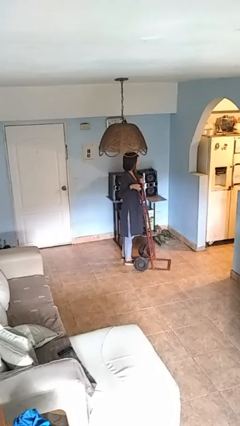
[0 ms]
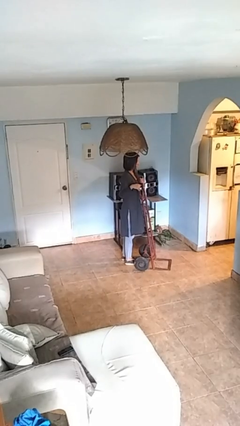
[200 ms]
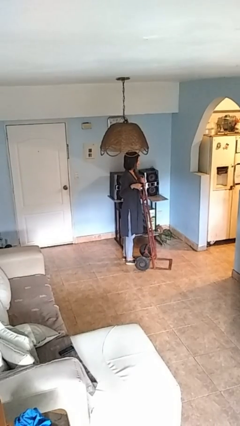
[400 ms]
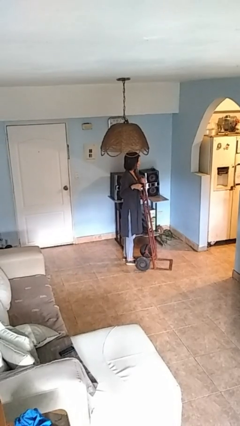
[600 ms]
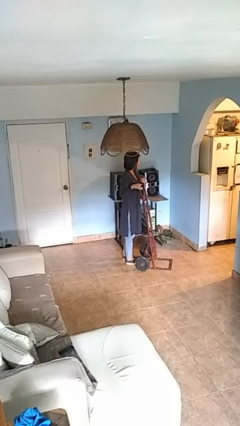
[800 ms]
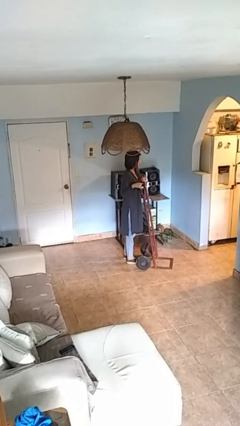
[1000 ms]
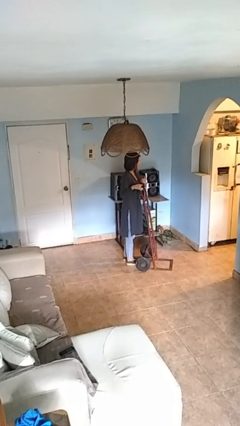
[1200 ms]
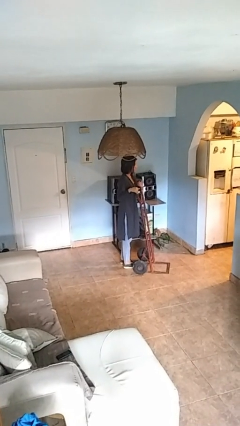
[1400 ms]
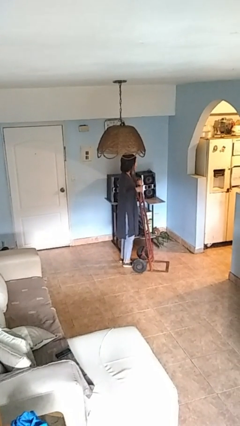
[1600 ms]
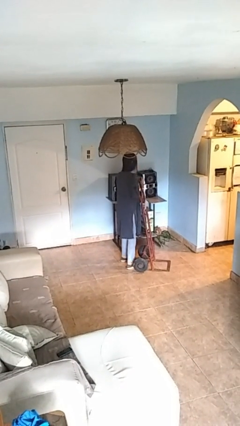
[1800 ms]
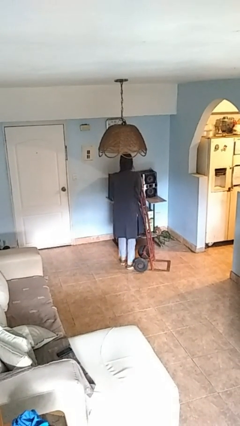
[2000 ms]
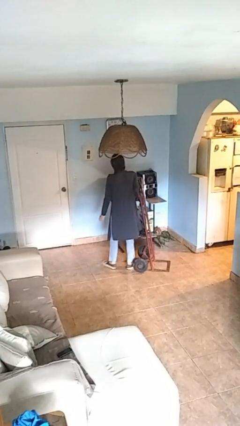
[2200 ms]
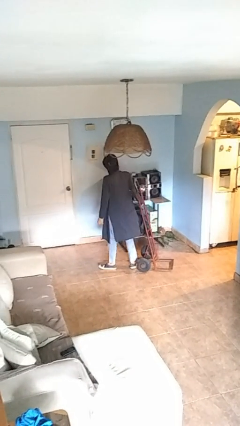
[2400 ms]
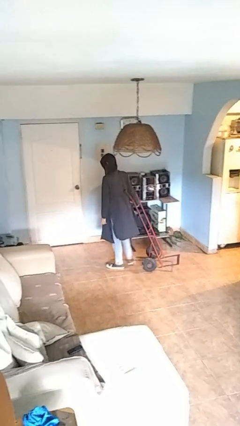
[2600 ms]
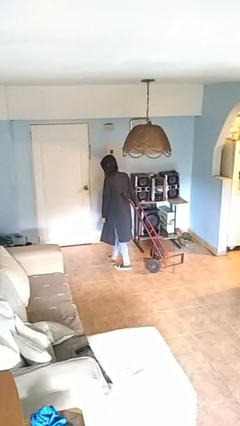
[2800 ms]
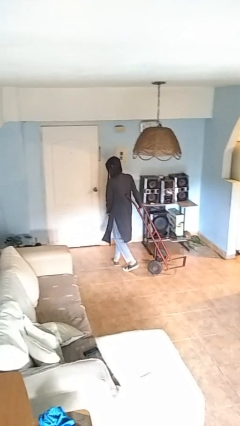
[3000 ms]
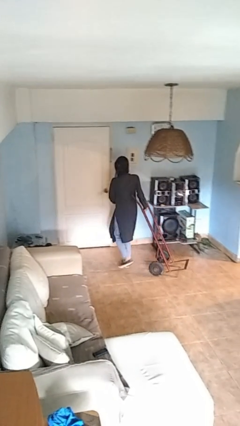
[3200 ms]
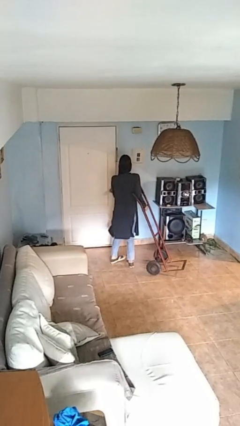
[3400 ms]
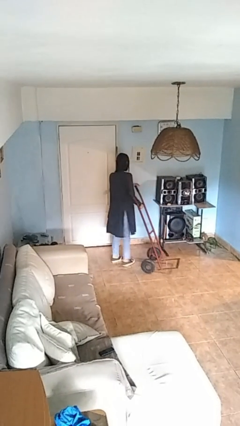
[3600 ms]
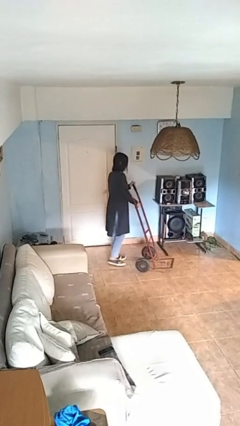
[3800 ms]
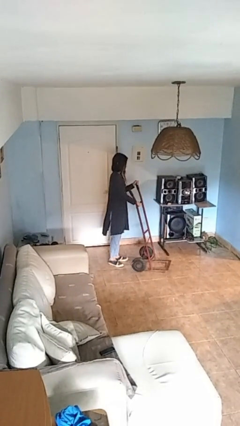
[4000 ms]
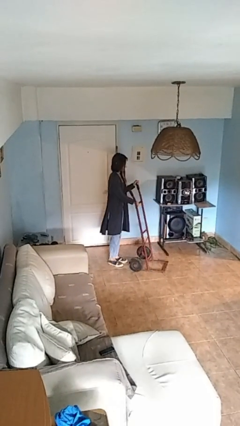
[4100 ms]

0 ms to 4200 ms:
person pulls wheeled cart

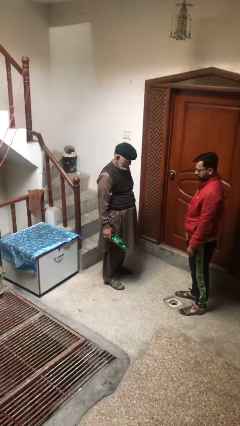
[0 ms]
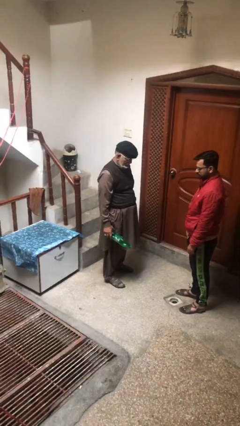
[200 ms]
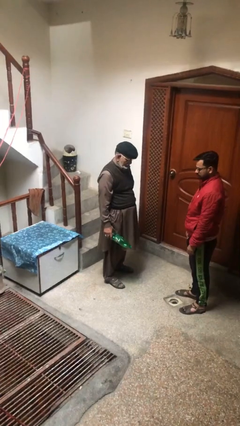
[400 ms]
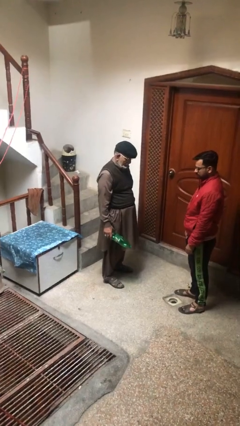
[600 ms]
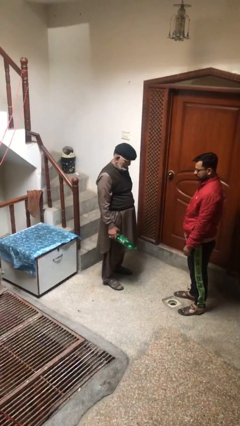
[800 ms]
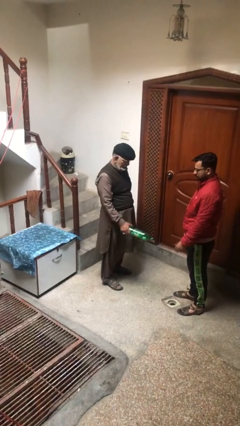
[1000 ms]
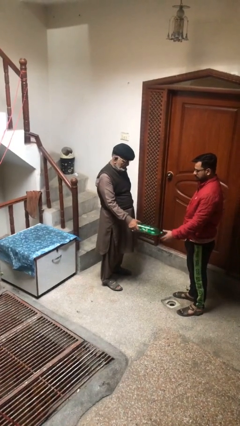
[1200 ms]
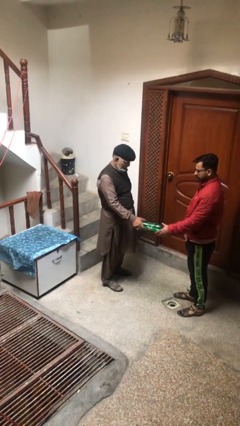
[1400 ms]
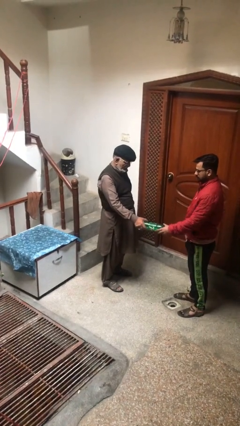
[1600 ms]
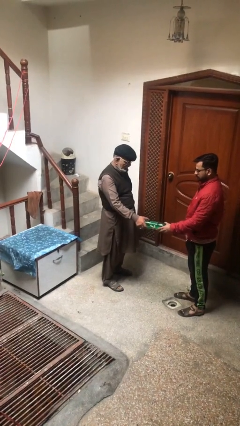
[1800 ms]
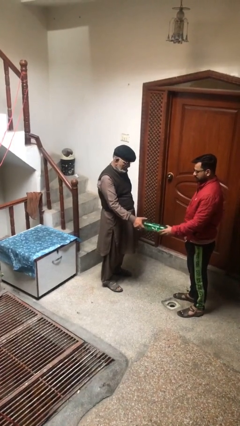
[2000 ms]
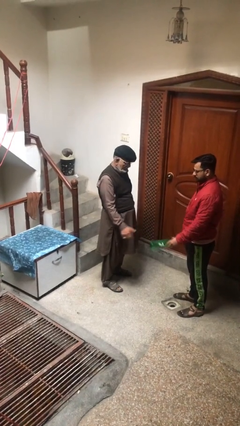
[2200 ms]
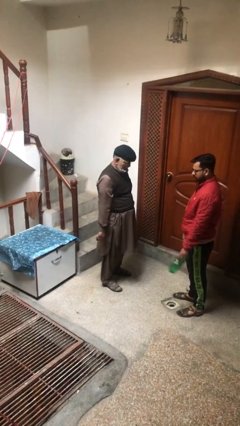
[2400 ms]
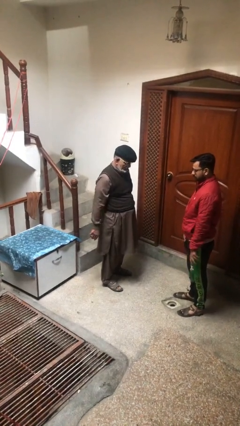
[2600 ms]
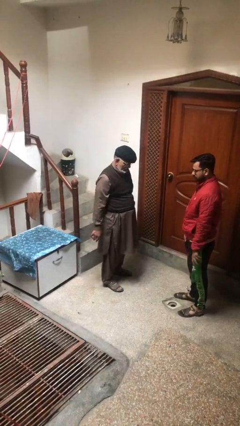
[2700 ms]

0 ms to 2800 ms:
person transfers object to person

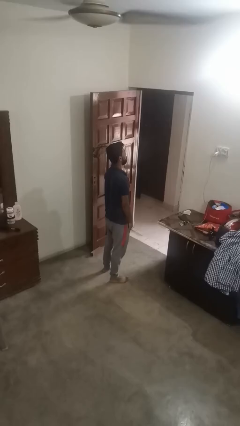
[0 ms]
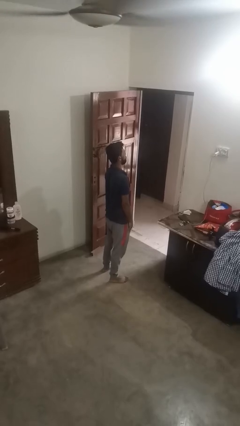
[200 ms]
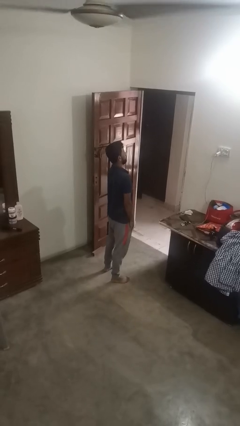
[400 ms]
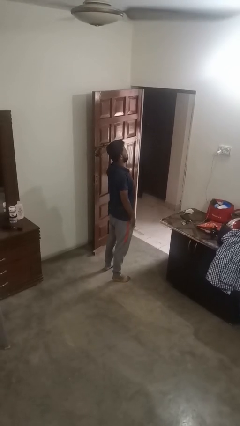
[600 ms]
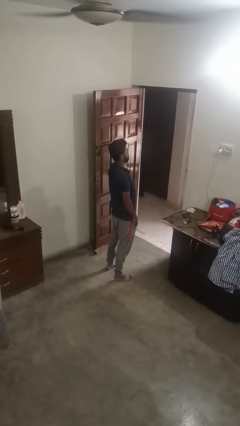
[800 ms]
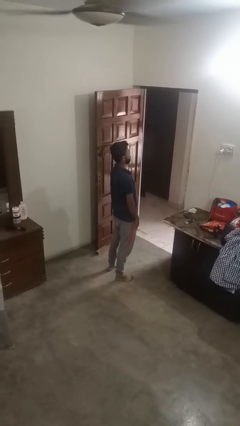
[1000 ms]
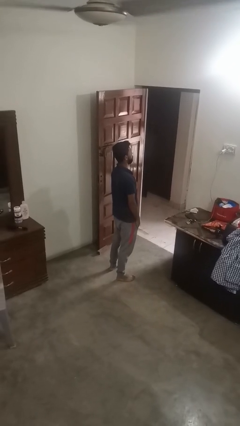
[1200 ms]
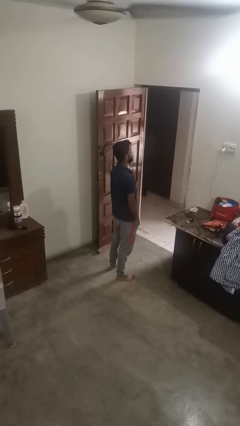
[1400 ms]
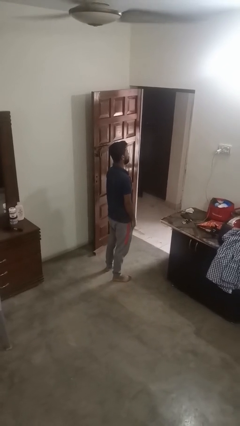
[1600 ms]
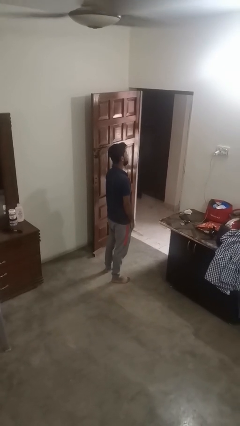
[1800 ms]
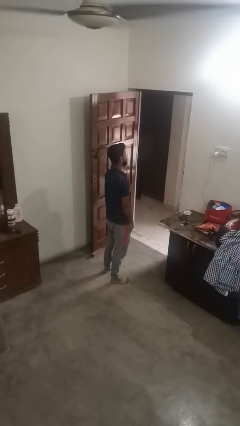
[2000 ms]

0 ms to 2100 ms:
person shrugs

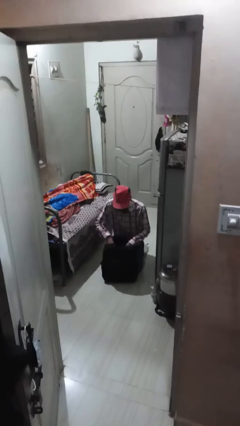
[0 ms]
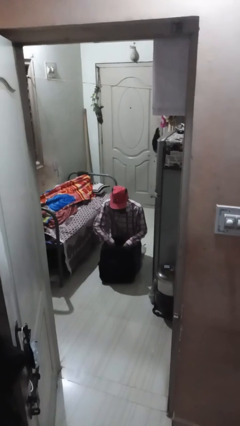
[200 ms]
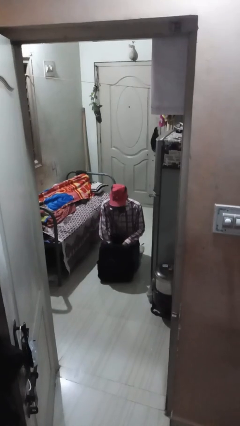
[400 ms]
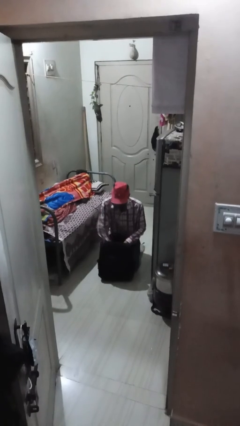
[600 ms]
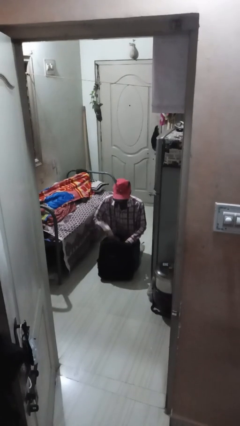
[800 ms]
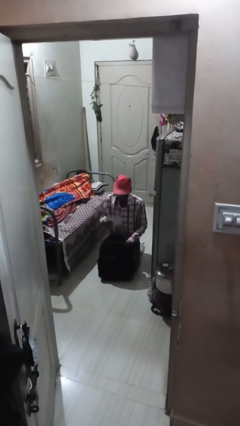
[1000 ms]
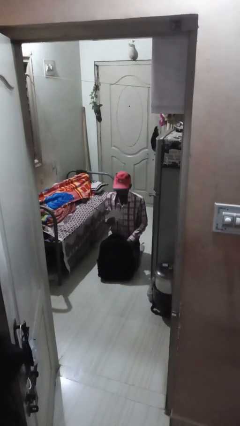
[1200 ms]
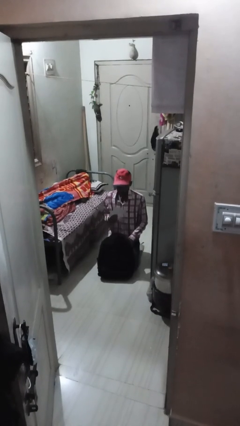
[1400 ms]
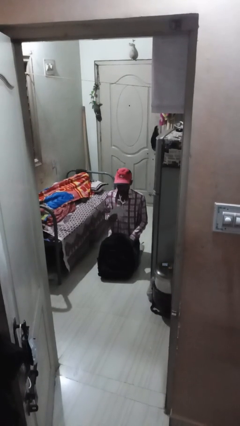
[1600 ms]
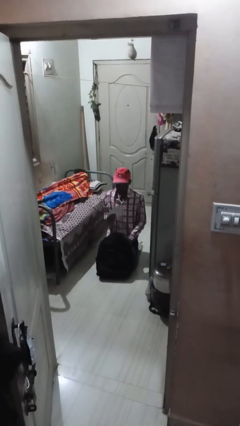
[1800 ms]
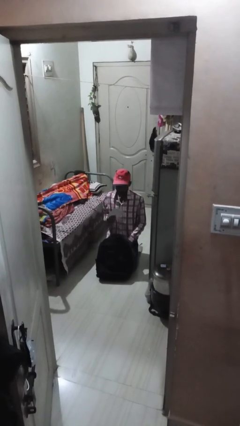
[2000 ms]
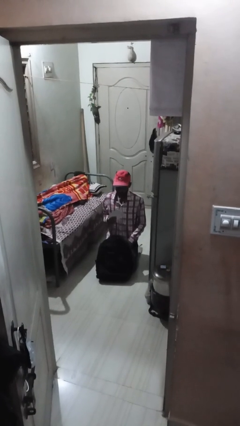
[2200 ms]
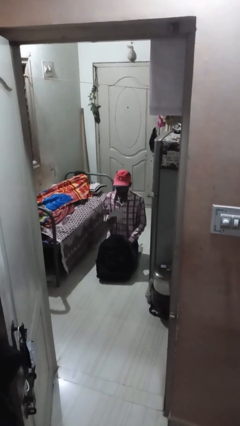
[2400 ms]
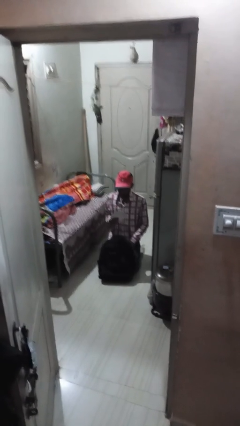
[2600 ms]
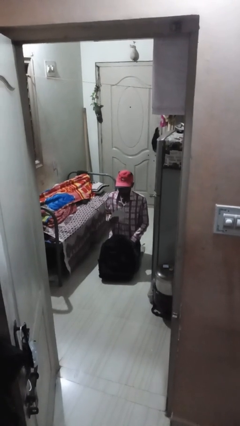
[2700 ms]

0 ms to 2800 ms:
person takes object from backpack

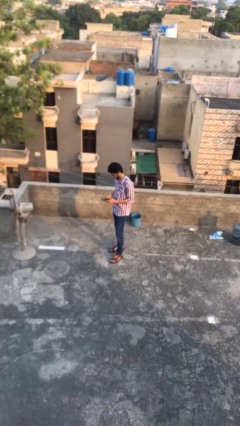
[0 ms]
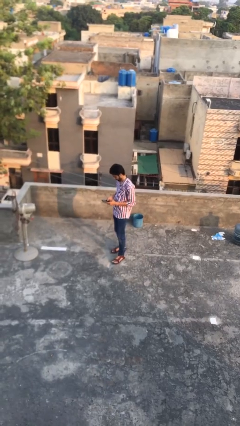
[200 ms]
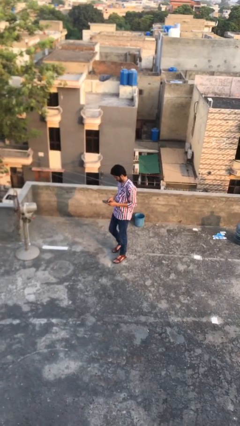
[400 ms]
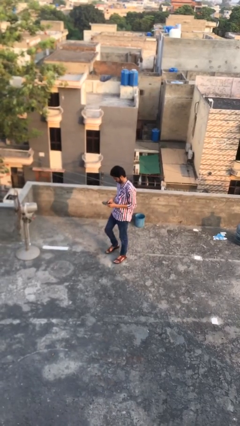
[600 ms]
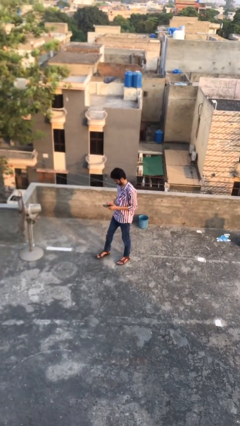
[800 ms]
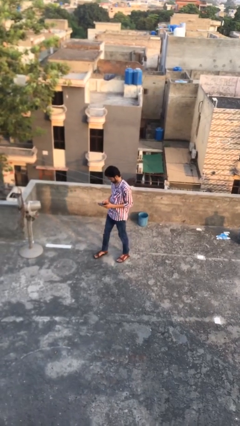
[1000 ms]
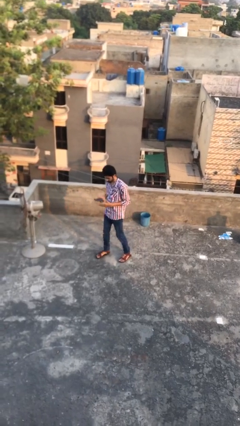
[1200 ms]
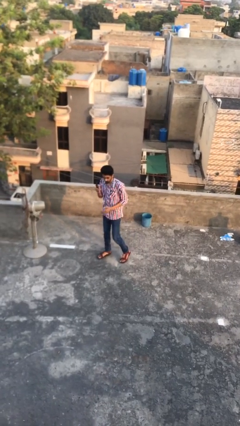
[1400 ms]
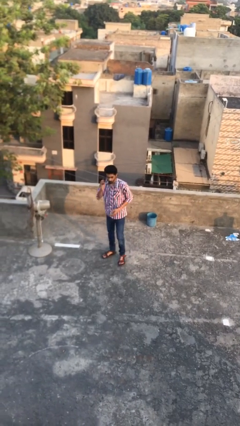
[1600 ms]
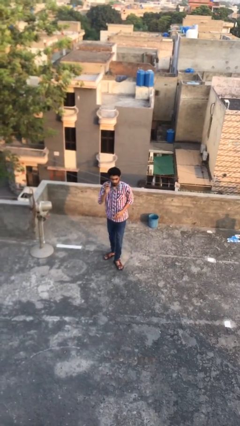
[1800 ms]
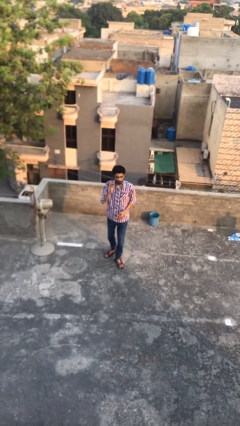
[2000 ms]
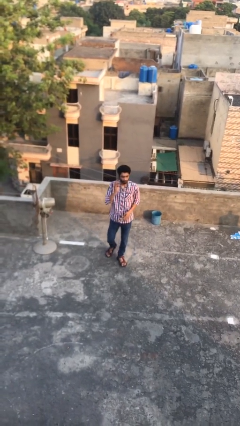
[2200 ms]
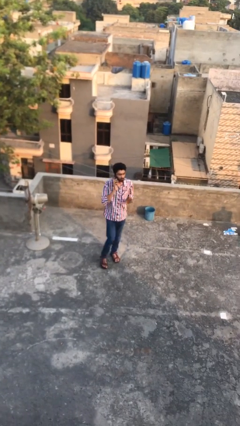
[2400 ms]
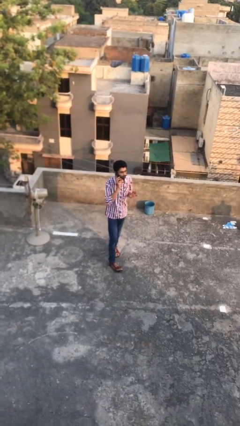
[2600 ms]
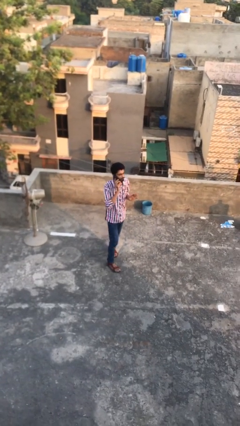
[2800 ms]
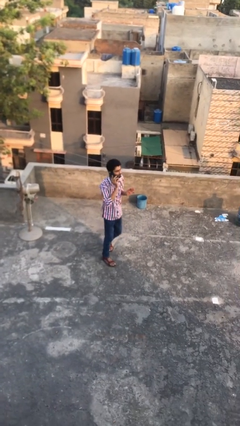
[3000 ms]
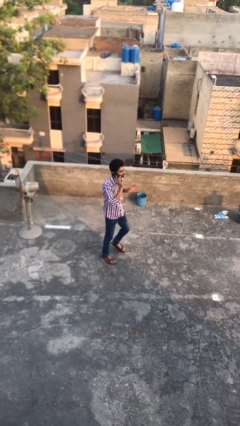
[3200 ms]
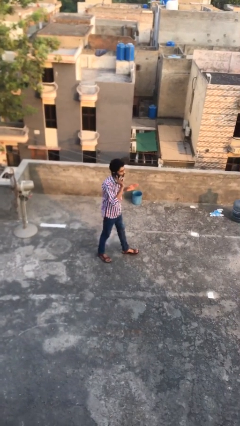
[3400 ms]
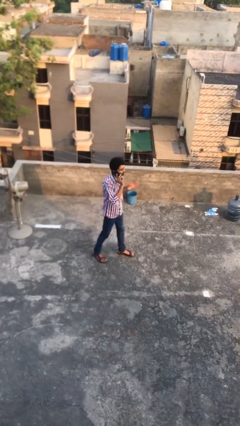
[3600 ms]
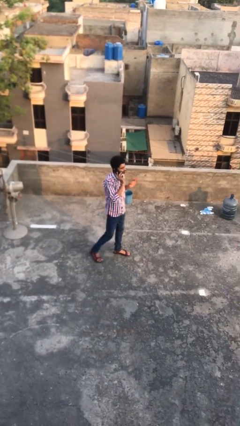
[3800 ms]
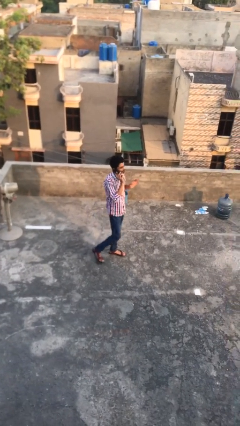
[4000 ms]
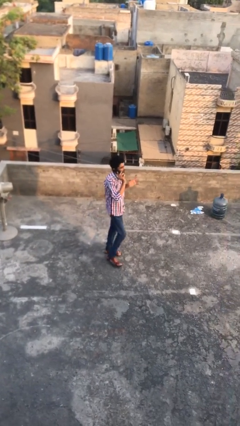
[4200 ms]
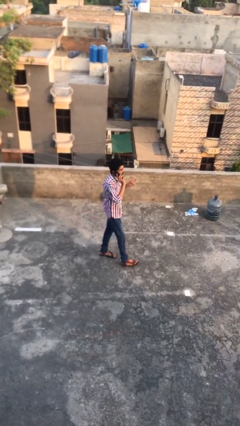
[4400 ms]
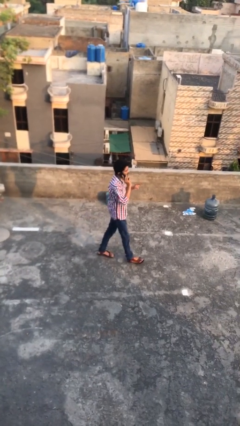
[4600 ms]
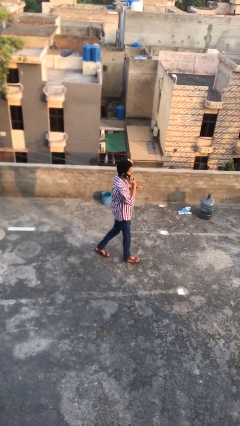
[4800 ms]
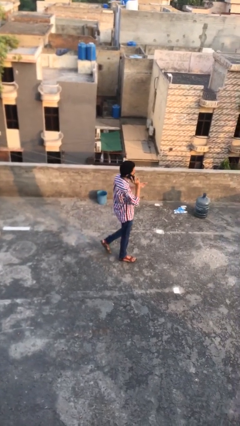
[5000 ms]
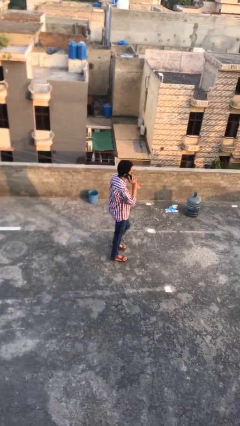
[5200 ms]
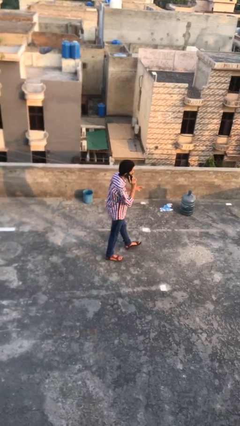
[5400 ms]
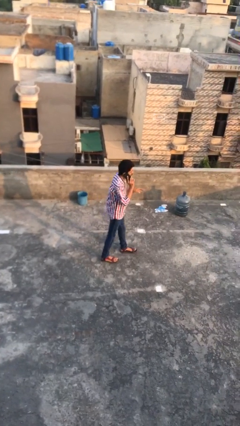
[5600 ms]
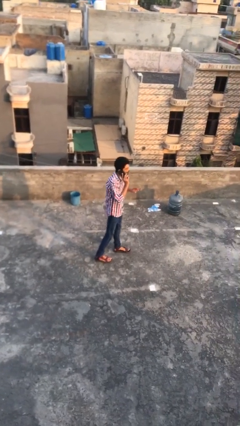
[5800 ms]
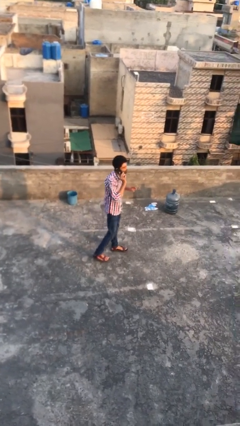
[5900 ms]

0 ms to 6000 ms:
person talks on phone
